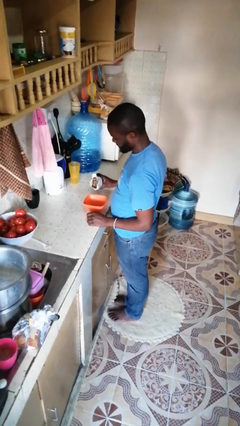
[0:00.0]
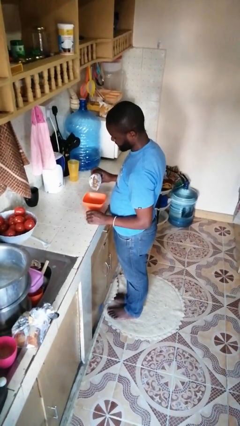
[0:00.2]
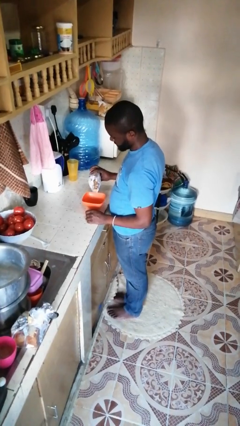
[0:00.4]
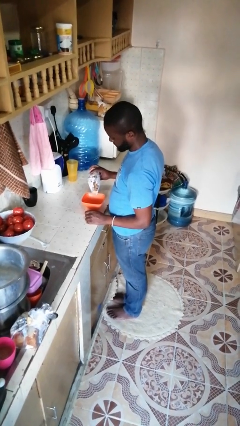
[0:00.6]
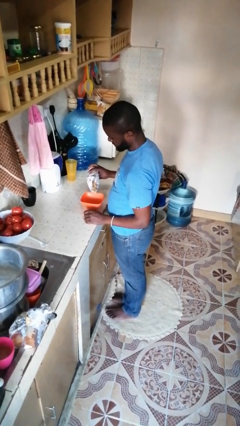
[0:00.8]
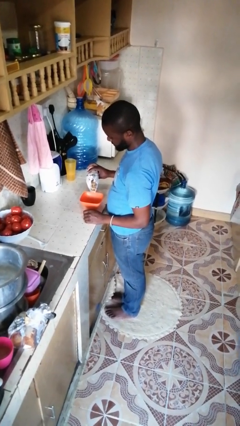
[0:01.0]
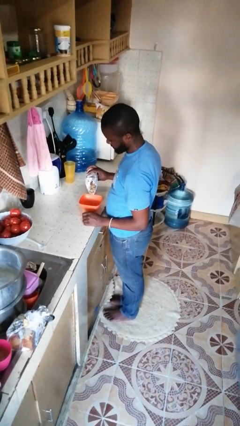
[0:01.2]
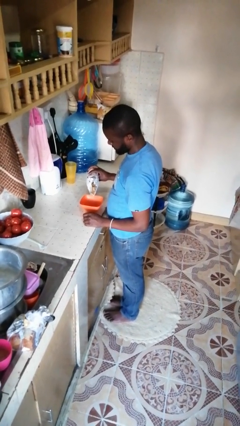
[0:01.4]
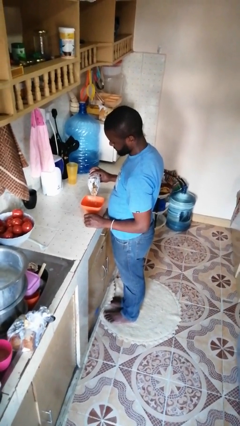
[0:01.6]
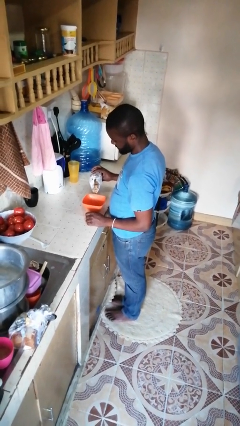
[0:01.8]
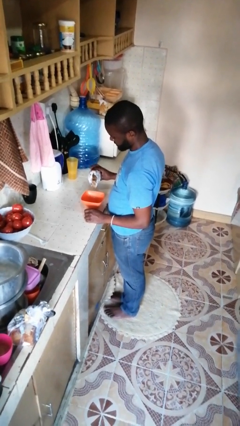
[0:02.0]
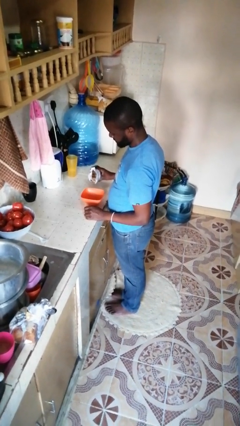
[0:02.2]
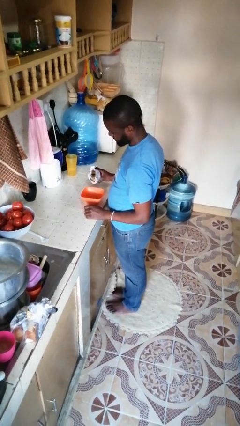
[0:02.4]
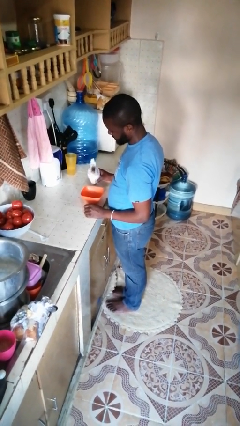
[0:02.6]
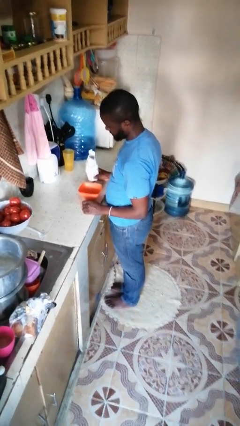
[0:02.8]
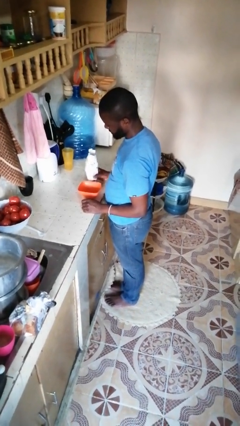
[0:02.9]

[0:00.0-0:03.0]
person pours into bowl

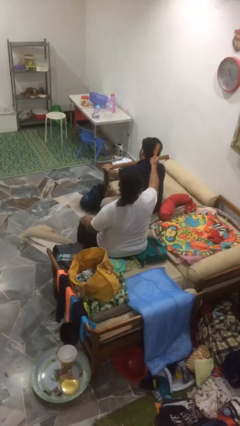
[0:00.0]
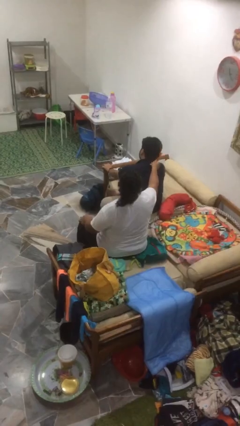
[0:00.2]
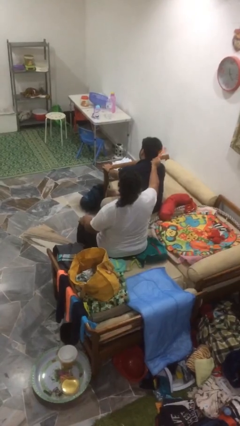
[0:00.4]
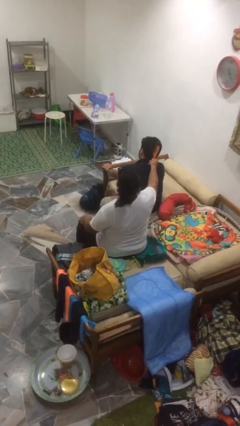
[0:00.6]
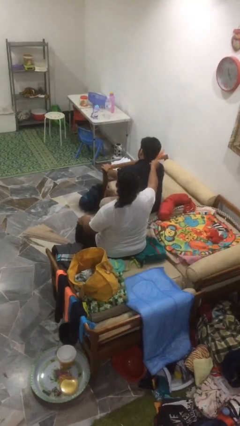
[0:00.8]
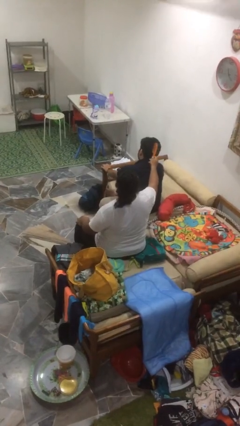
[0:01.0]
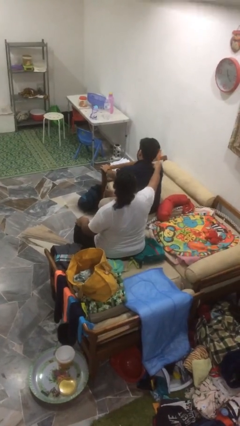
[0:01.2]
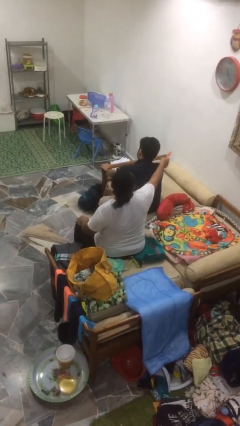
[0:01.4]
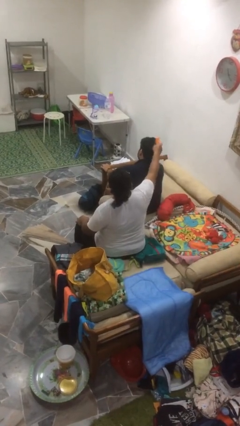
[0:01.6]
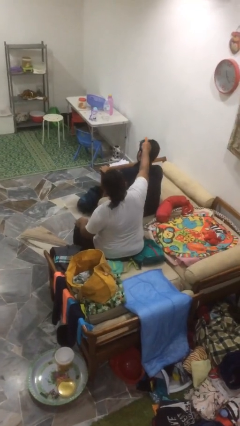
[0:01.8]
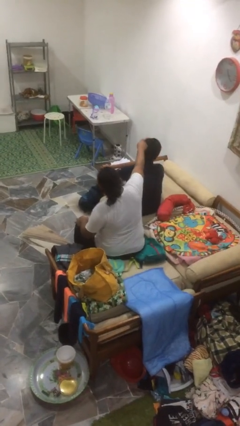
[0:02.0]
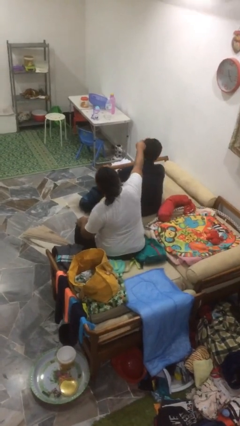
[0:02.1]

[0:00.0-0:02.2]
person brushes hair of person

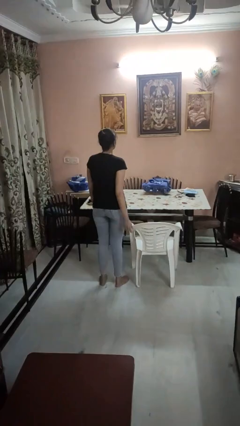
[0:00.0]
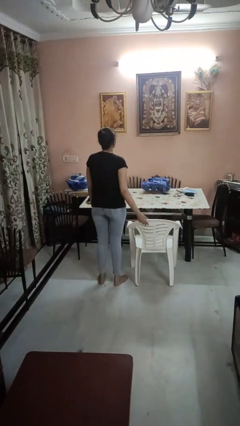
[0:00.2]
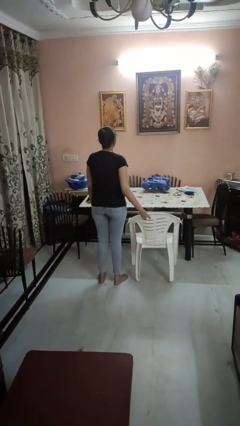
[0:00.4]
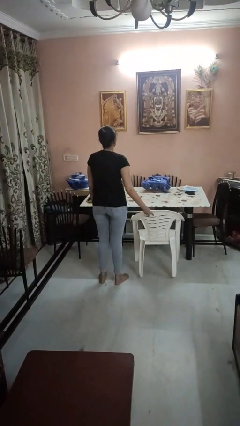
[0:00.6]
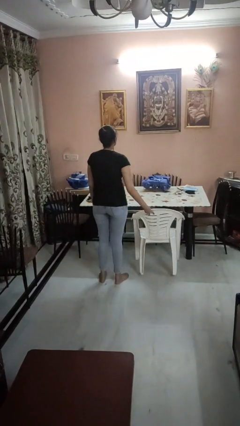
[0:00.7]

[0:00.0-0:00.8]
person pushes in chair

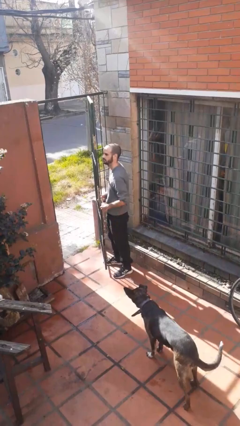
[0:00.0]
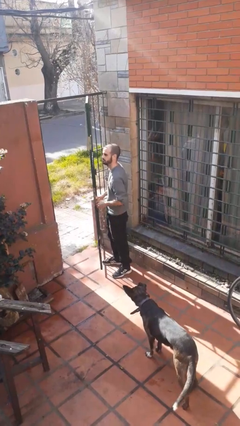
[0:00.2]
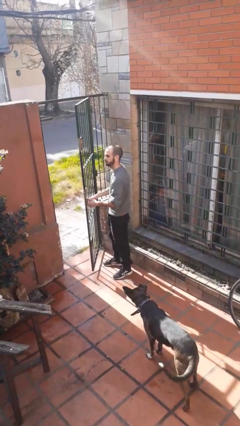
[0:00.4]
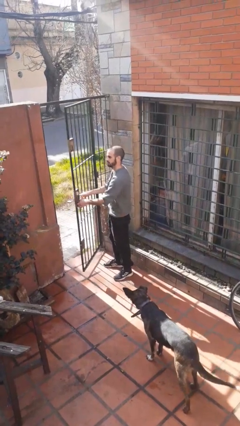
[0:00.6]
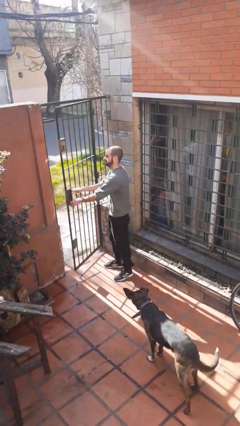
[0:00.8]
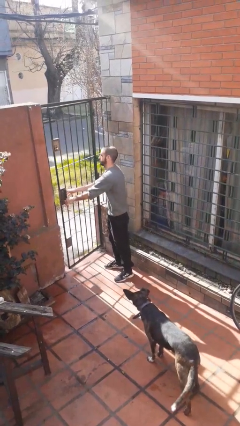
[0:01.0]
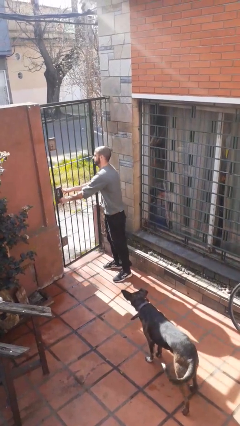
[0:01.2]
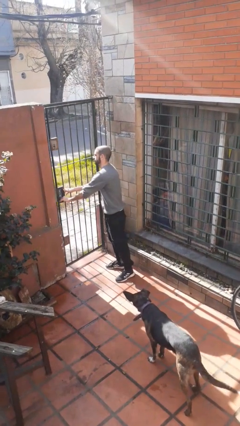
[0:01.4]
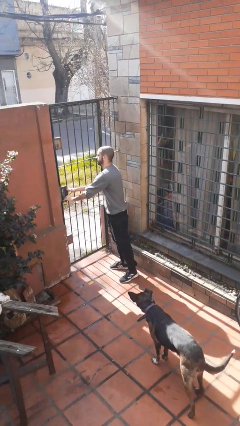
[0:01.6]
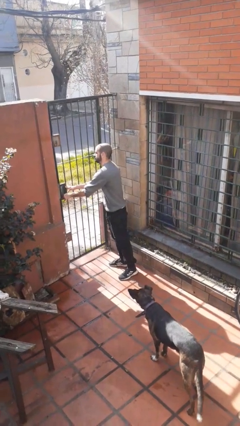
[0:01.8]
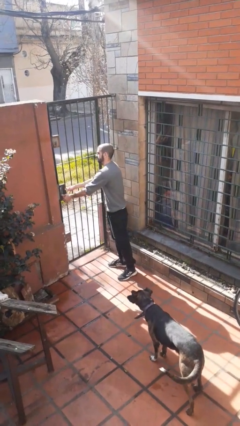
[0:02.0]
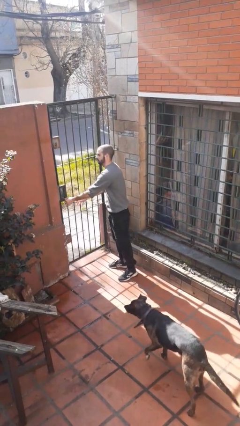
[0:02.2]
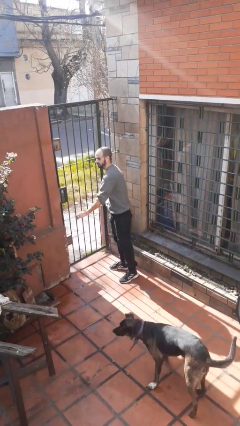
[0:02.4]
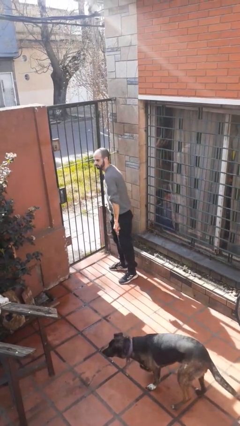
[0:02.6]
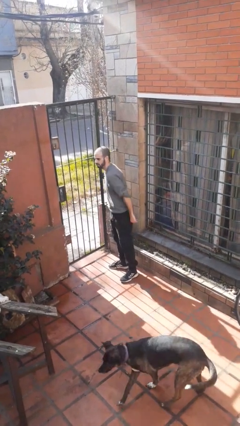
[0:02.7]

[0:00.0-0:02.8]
person closes gate

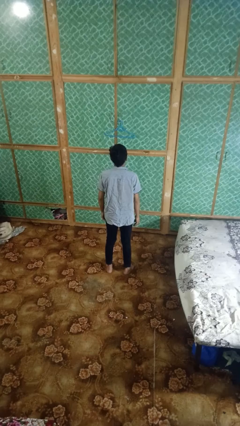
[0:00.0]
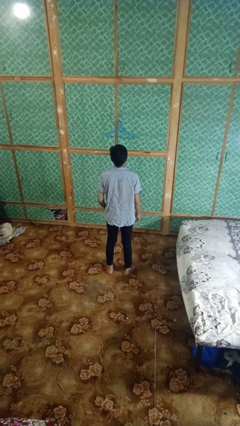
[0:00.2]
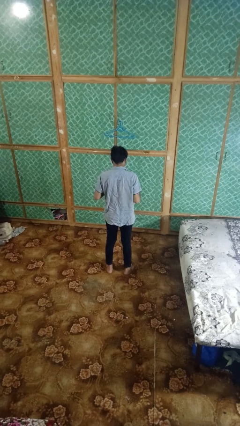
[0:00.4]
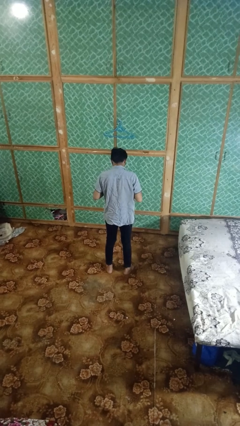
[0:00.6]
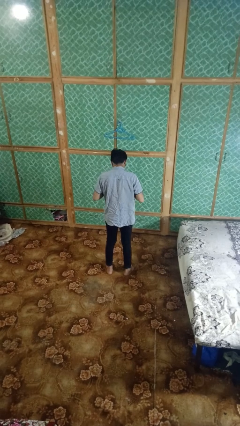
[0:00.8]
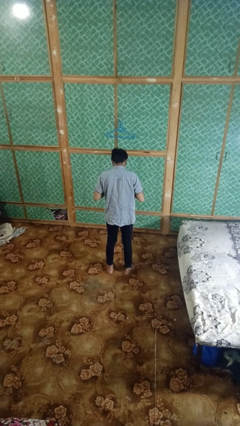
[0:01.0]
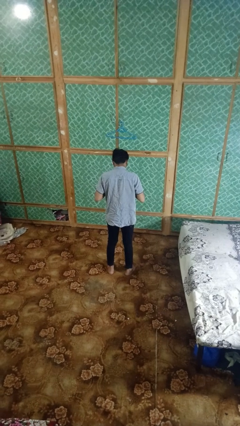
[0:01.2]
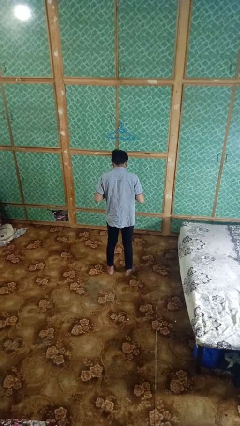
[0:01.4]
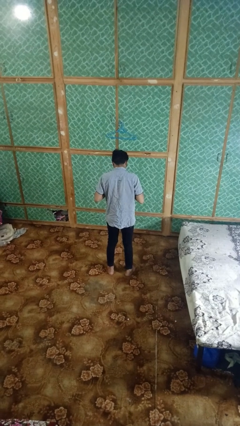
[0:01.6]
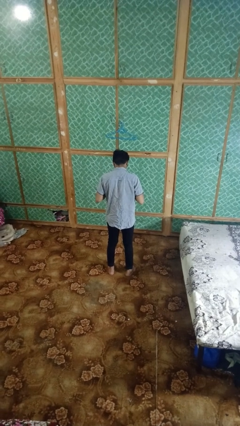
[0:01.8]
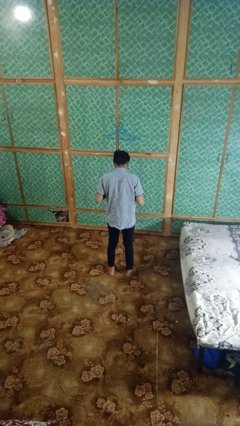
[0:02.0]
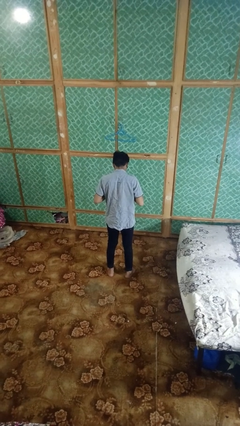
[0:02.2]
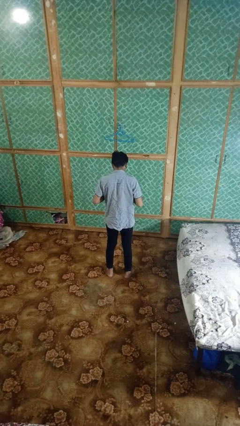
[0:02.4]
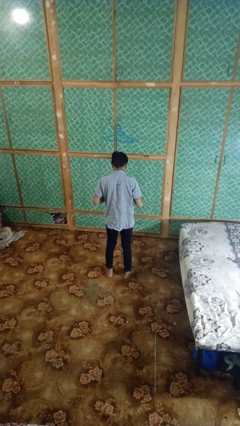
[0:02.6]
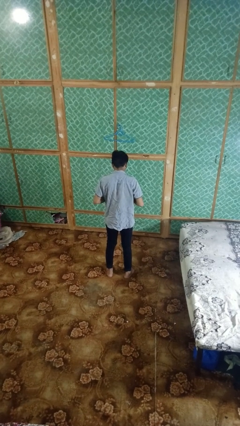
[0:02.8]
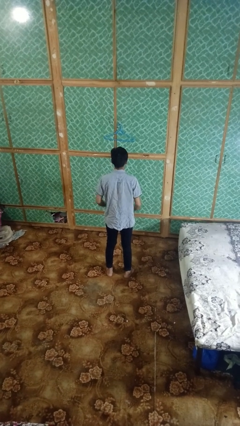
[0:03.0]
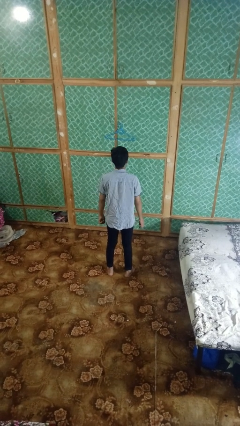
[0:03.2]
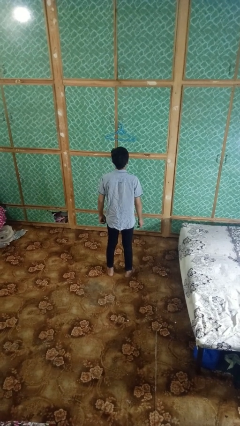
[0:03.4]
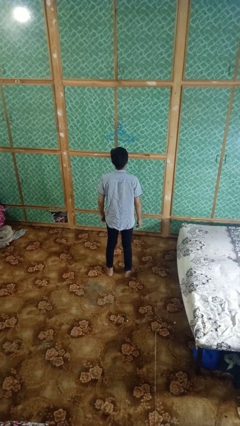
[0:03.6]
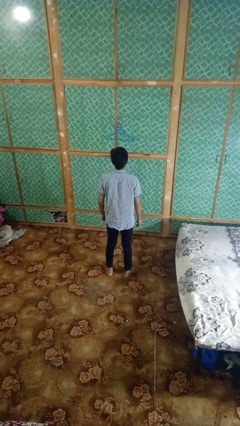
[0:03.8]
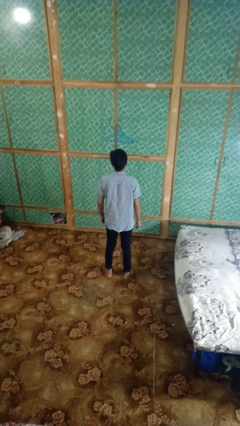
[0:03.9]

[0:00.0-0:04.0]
person unbuttons shirt

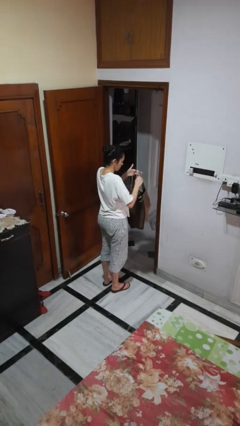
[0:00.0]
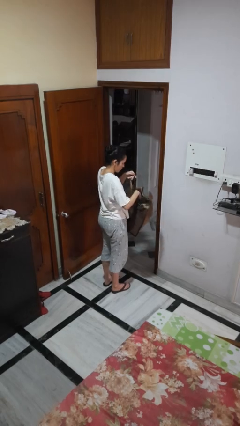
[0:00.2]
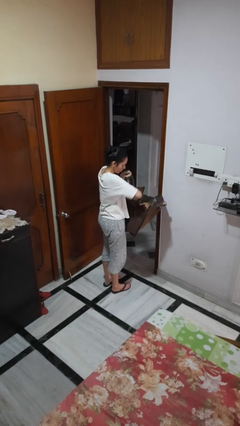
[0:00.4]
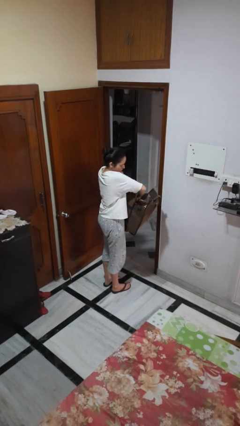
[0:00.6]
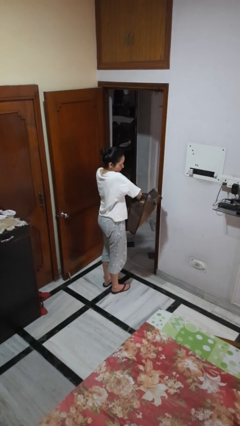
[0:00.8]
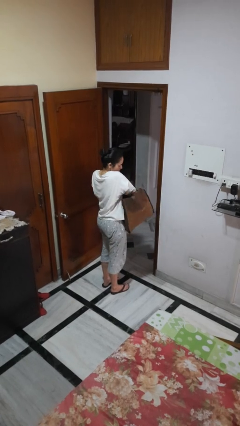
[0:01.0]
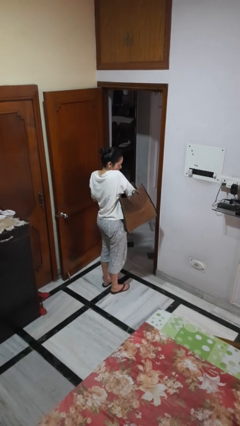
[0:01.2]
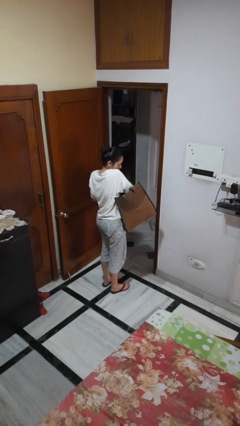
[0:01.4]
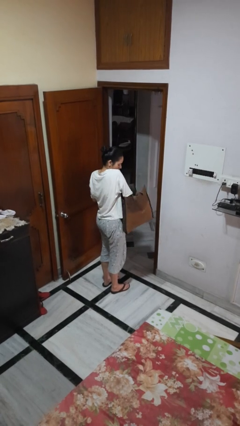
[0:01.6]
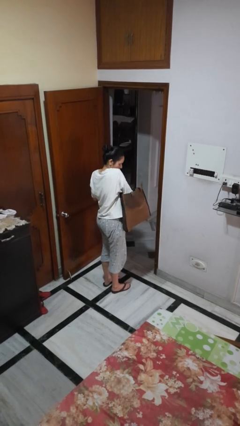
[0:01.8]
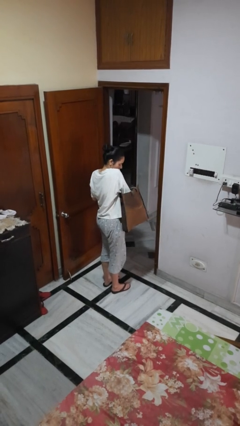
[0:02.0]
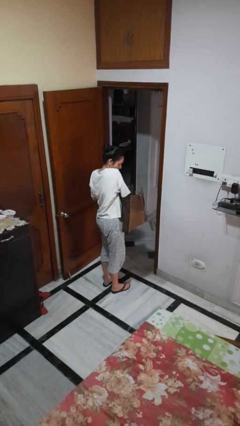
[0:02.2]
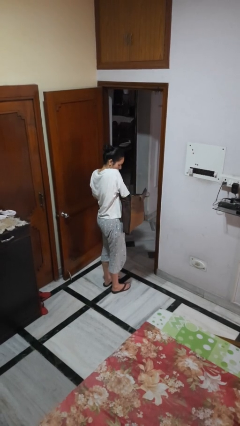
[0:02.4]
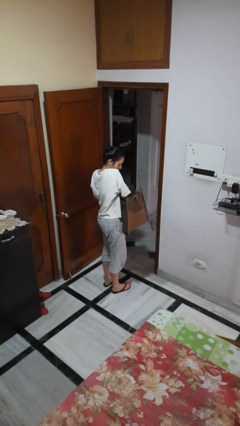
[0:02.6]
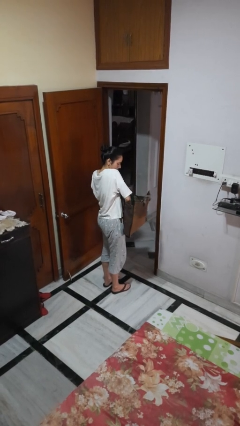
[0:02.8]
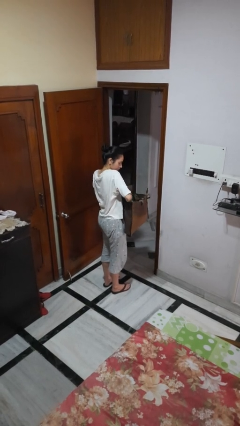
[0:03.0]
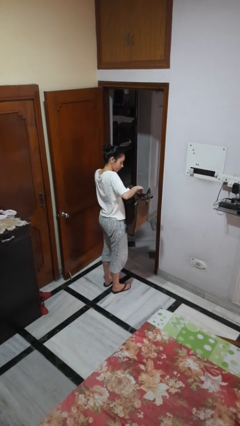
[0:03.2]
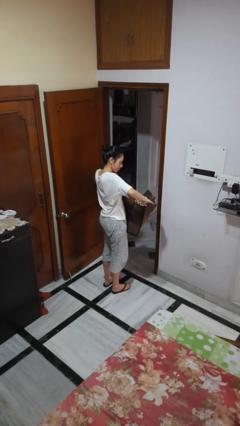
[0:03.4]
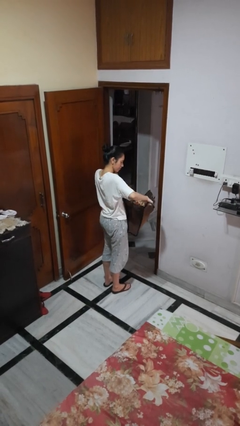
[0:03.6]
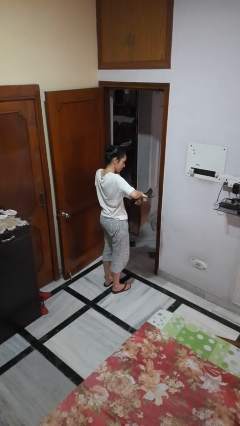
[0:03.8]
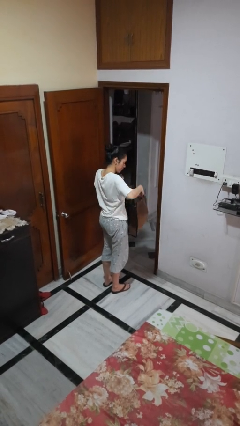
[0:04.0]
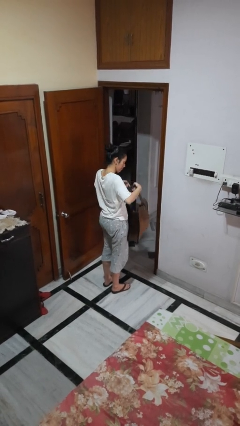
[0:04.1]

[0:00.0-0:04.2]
person searches in bag

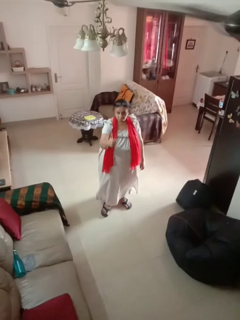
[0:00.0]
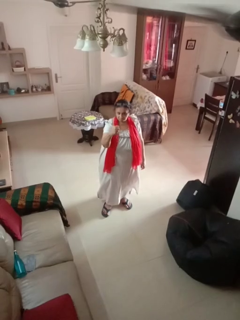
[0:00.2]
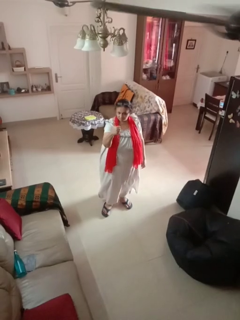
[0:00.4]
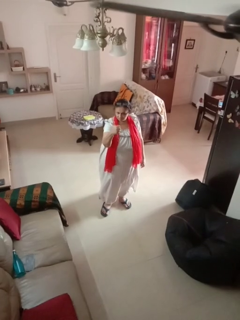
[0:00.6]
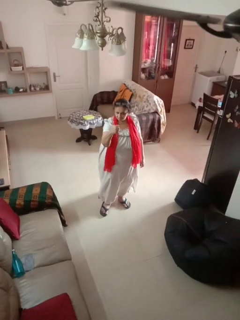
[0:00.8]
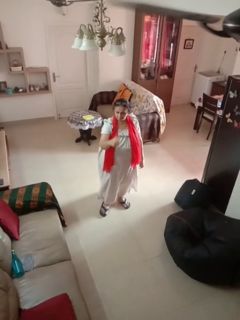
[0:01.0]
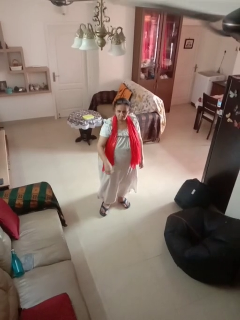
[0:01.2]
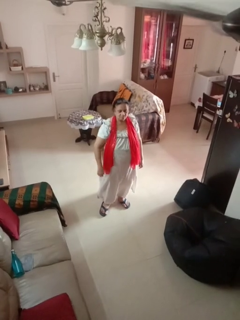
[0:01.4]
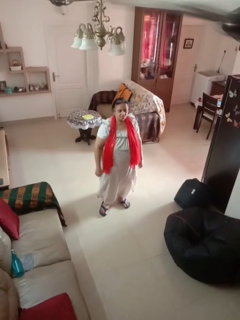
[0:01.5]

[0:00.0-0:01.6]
person gestures thumbs up
